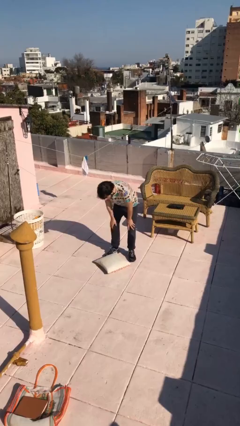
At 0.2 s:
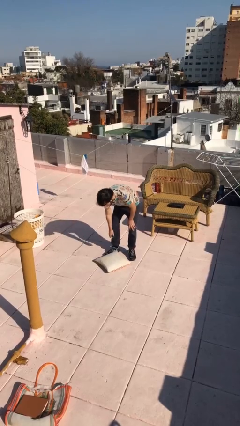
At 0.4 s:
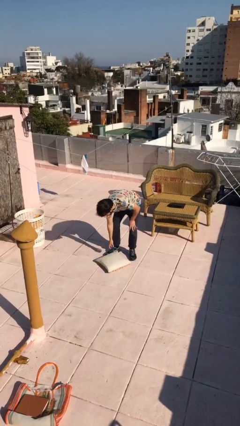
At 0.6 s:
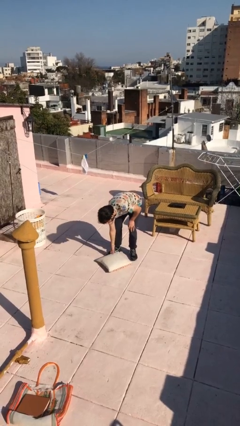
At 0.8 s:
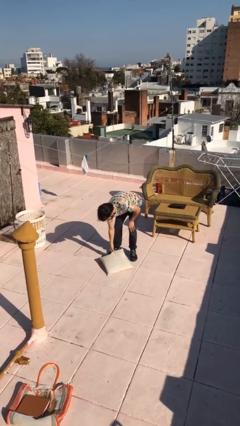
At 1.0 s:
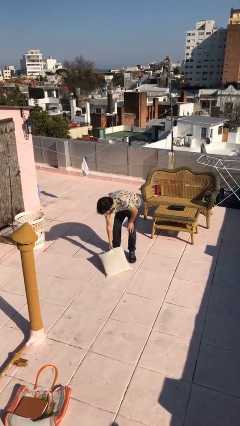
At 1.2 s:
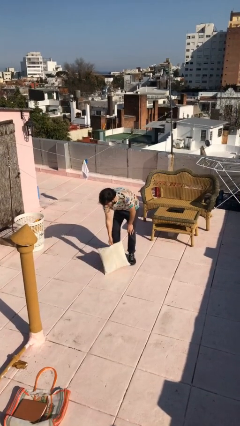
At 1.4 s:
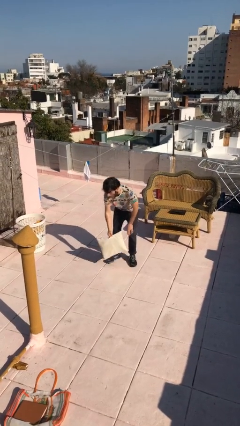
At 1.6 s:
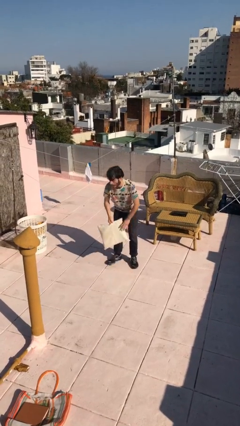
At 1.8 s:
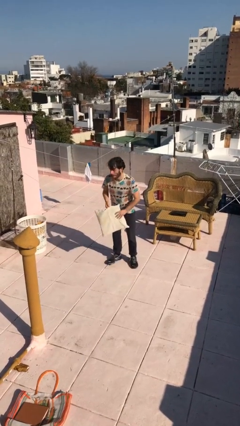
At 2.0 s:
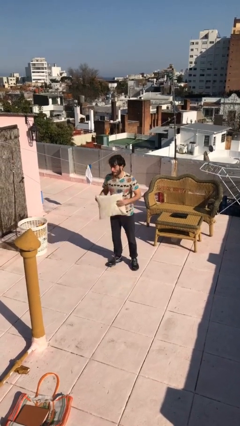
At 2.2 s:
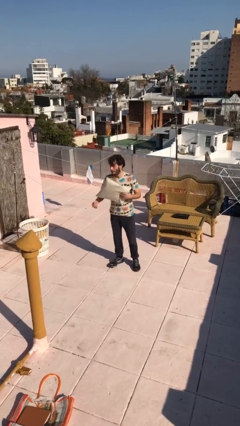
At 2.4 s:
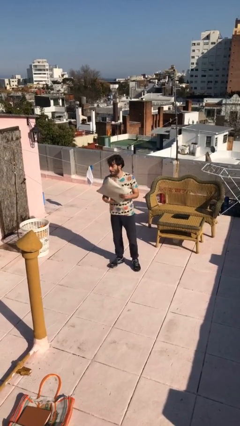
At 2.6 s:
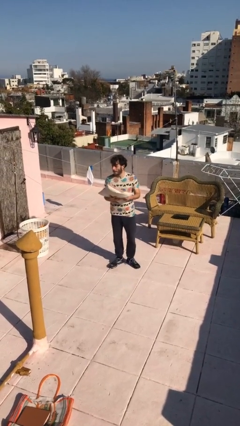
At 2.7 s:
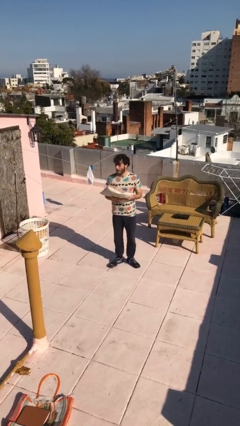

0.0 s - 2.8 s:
person picks up object from floor

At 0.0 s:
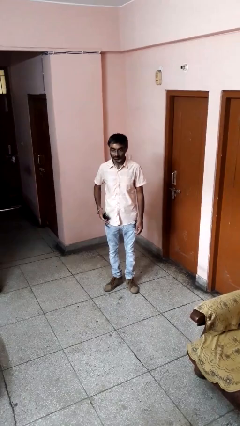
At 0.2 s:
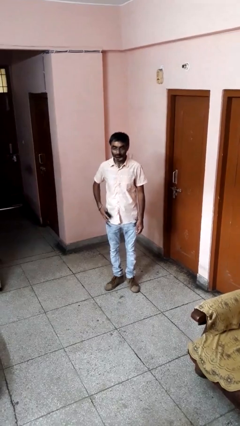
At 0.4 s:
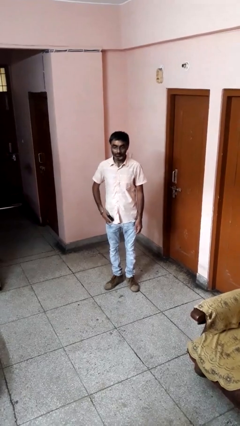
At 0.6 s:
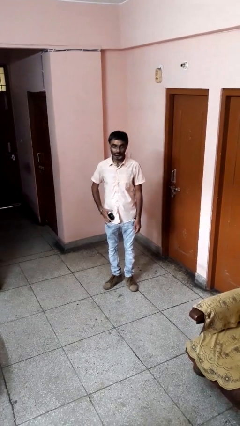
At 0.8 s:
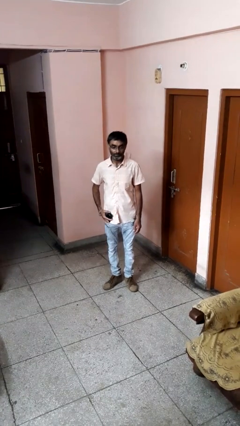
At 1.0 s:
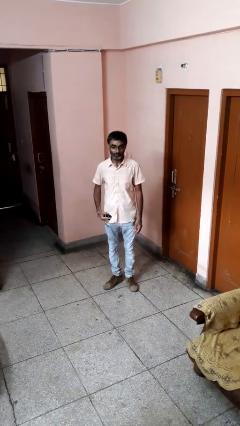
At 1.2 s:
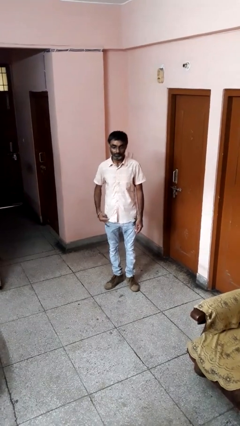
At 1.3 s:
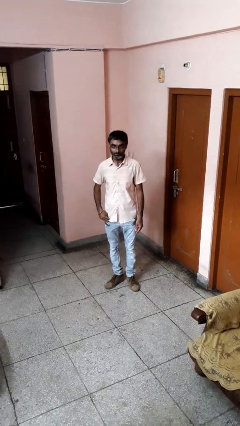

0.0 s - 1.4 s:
person puts phone into pocket

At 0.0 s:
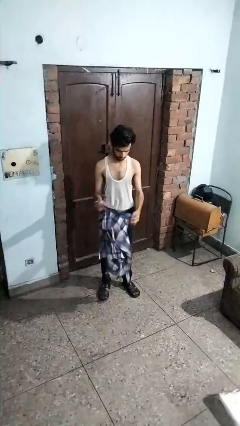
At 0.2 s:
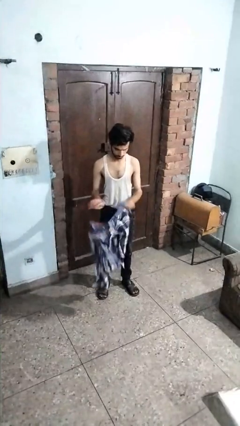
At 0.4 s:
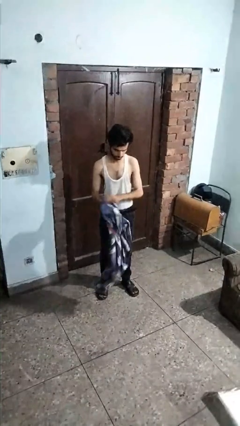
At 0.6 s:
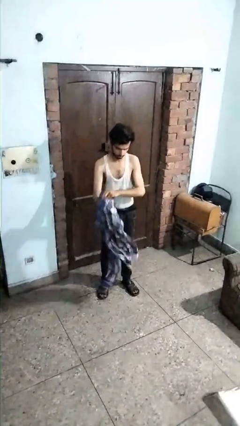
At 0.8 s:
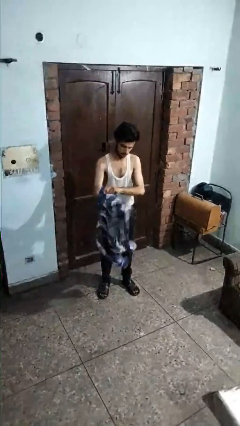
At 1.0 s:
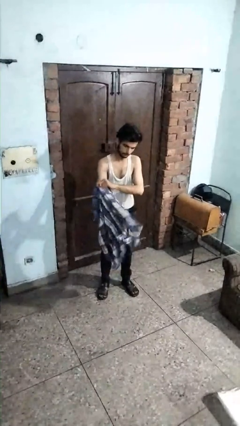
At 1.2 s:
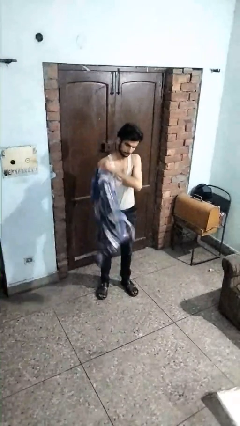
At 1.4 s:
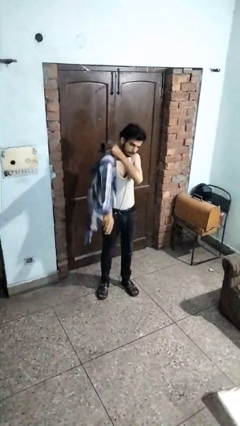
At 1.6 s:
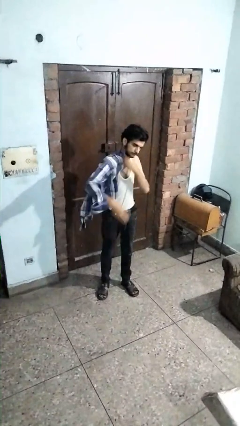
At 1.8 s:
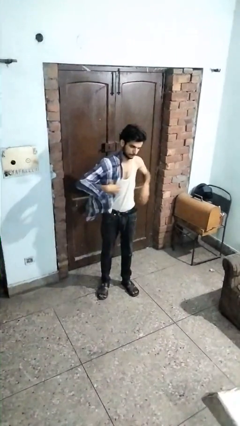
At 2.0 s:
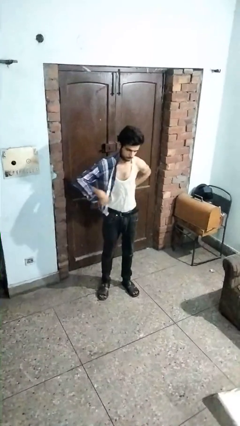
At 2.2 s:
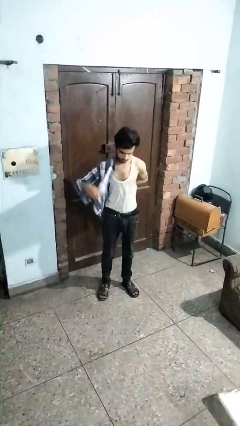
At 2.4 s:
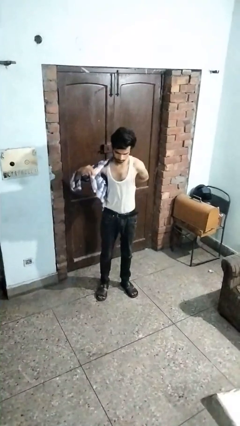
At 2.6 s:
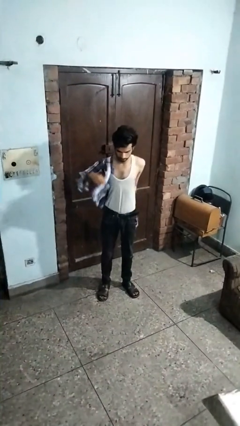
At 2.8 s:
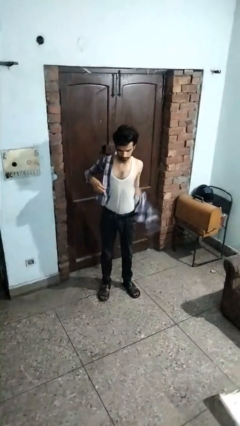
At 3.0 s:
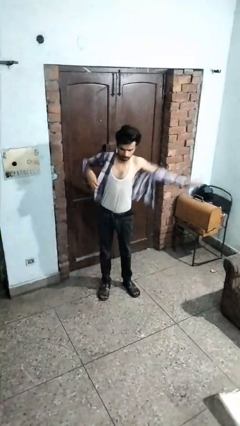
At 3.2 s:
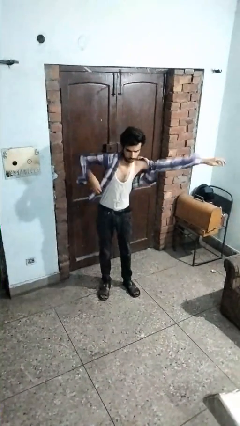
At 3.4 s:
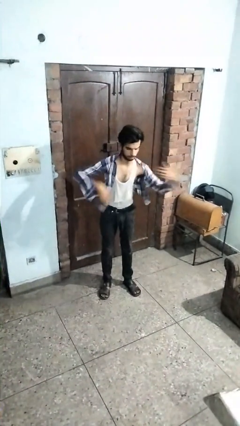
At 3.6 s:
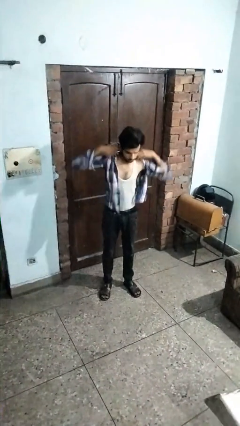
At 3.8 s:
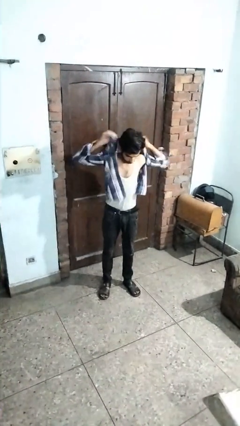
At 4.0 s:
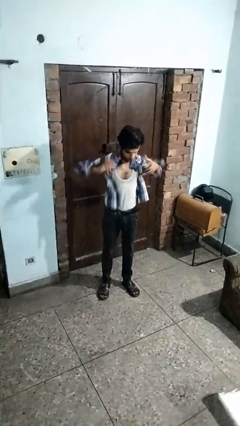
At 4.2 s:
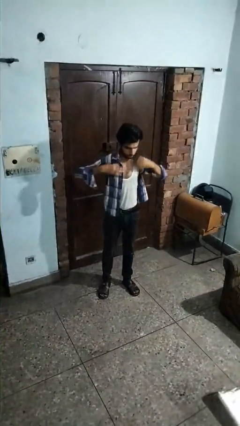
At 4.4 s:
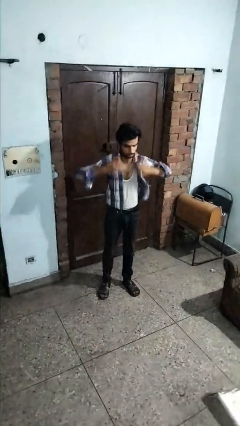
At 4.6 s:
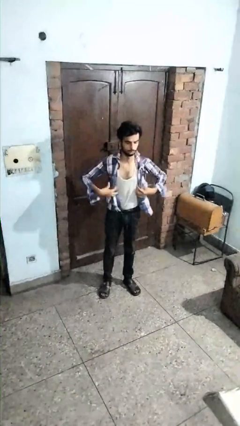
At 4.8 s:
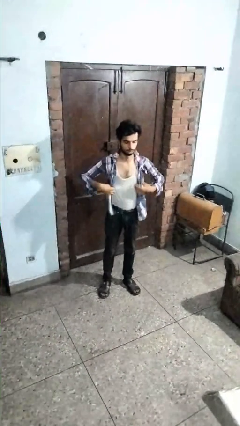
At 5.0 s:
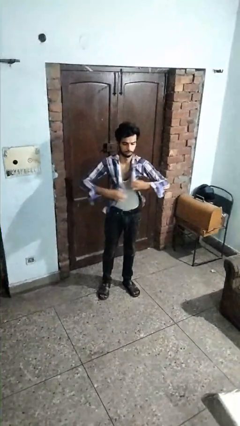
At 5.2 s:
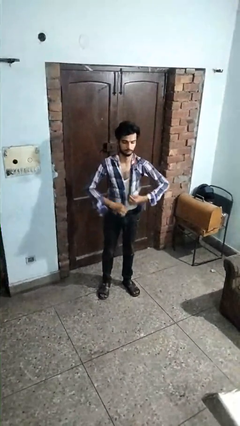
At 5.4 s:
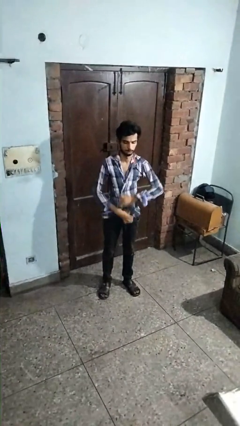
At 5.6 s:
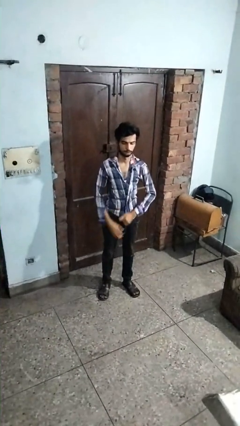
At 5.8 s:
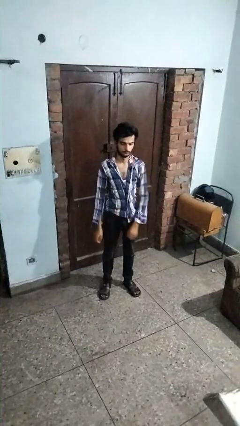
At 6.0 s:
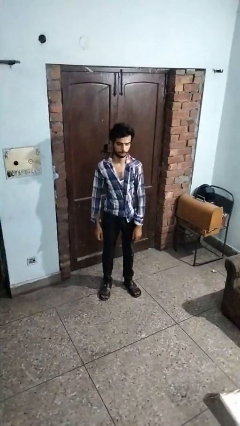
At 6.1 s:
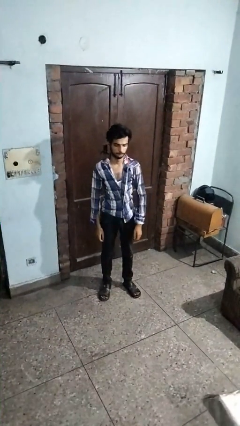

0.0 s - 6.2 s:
person puts on shirt

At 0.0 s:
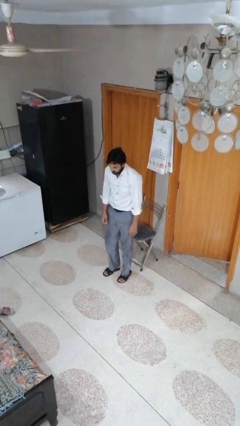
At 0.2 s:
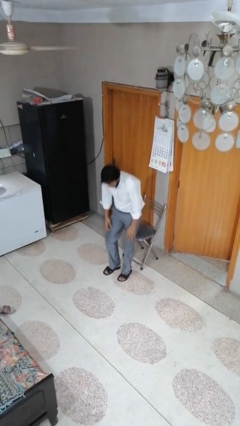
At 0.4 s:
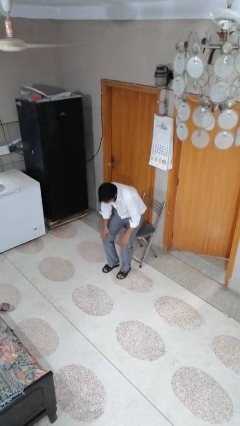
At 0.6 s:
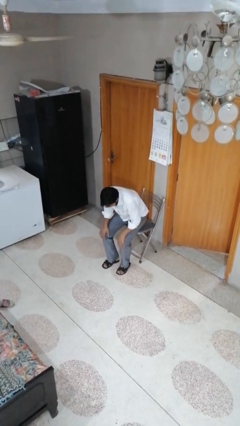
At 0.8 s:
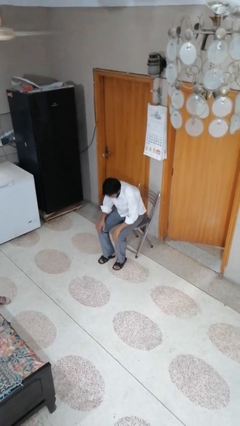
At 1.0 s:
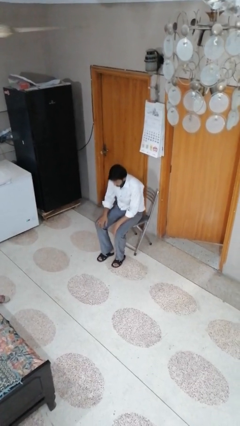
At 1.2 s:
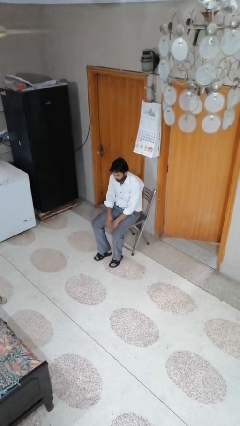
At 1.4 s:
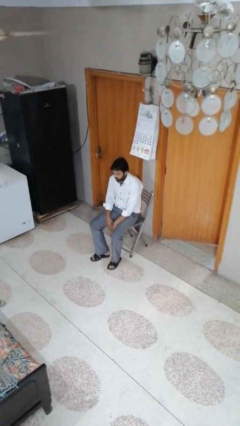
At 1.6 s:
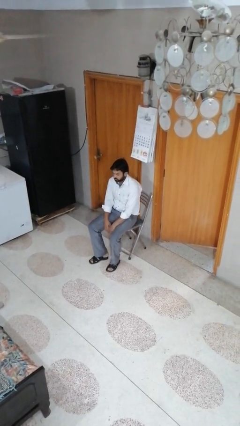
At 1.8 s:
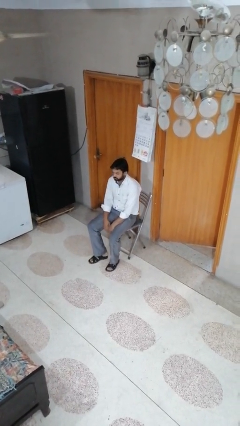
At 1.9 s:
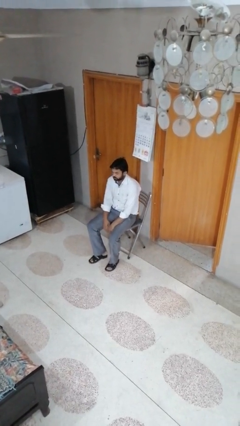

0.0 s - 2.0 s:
person sits down

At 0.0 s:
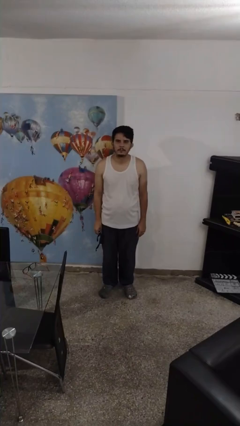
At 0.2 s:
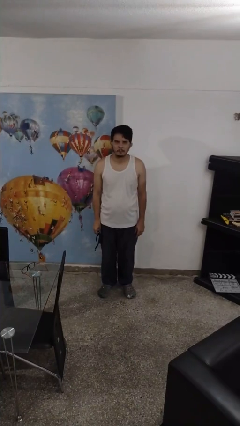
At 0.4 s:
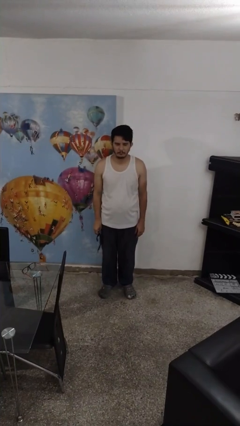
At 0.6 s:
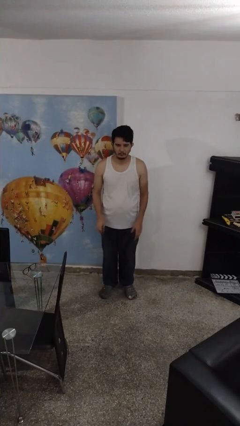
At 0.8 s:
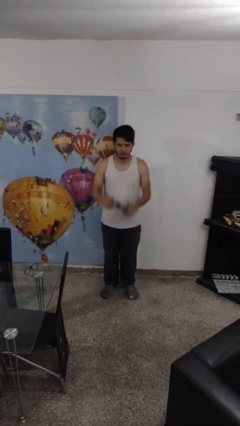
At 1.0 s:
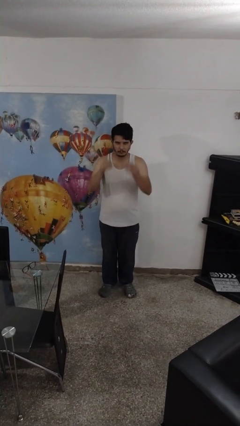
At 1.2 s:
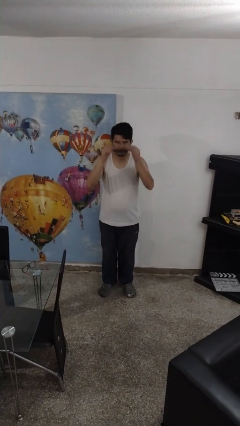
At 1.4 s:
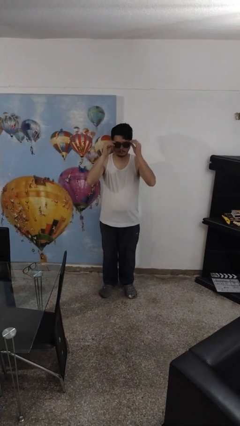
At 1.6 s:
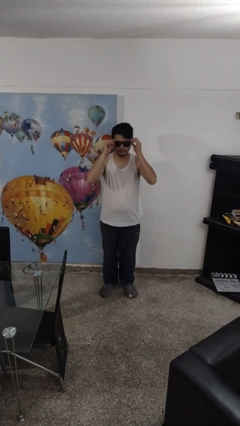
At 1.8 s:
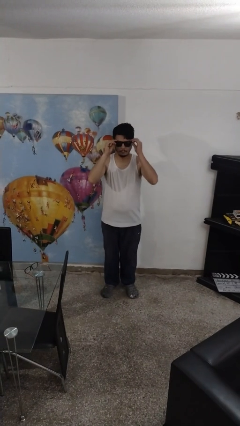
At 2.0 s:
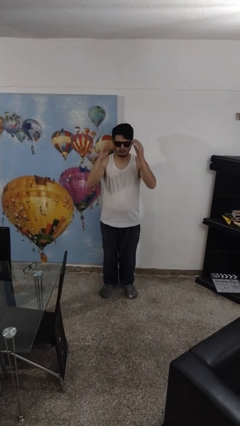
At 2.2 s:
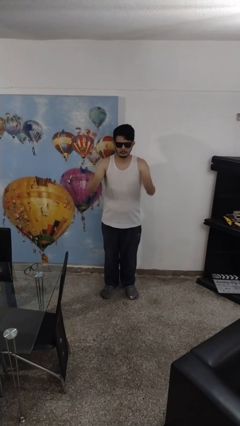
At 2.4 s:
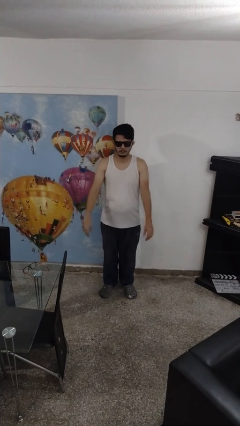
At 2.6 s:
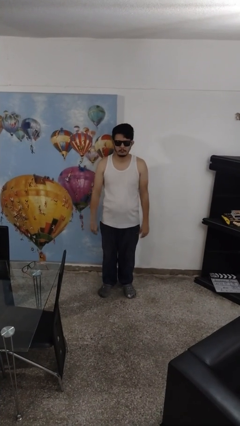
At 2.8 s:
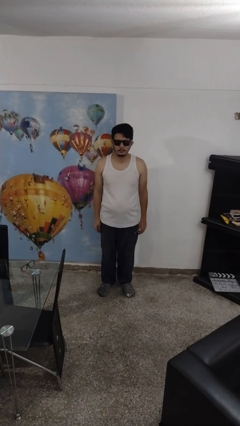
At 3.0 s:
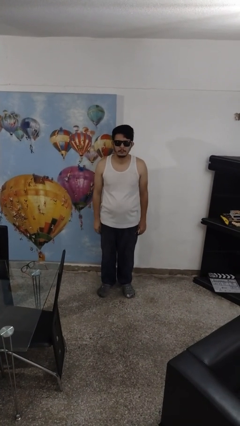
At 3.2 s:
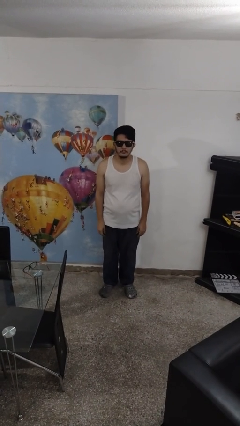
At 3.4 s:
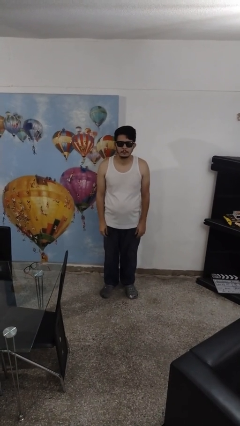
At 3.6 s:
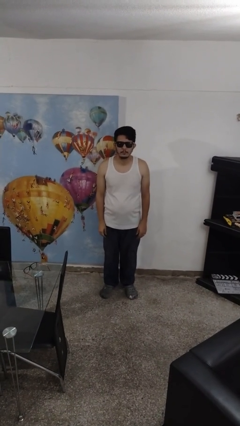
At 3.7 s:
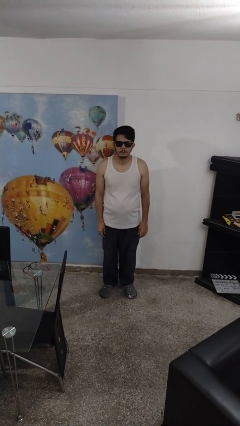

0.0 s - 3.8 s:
person puts on sunglasses

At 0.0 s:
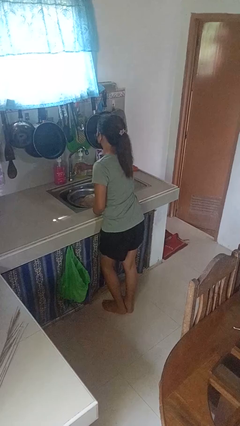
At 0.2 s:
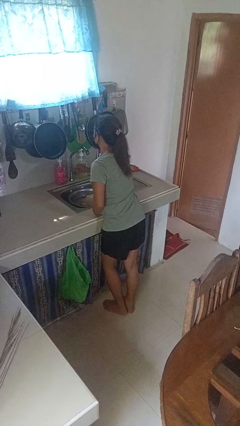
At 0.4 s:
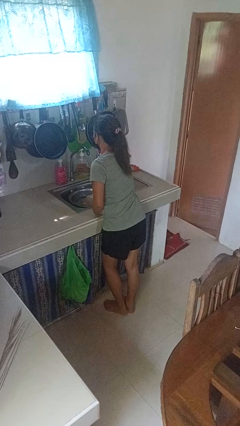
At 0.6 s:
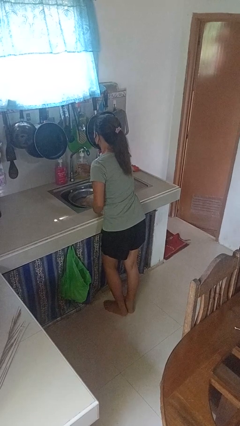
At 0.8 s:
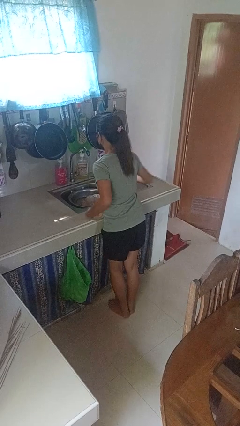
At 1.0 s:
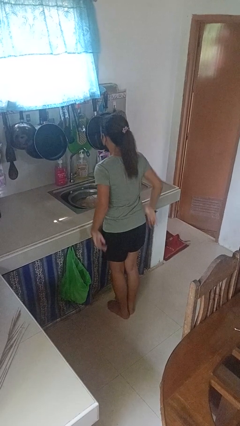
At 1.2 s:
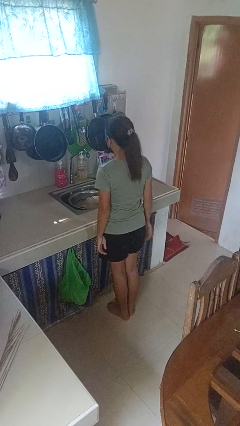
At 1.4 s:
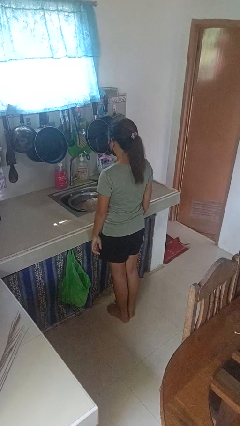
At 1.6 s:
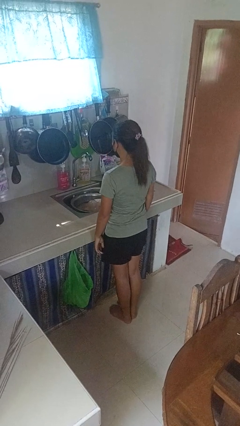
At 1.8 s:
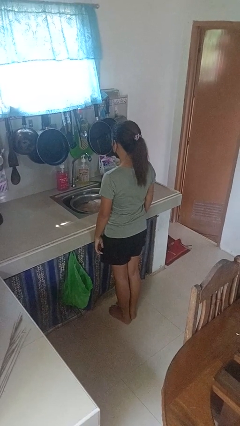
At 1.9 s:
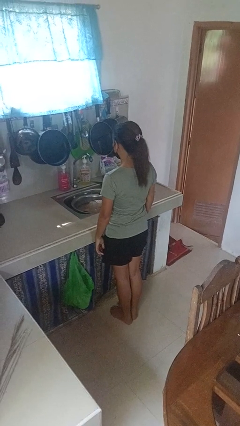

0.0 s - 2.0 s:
person turns on faucet
